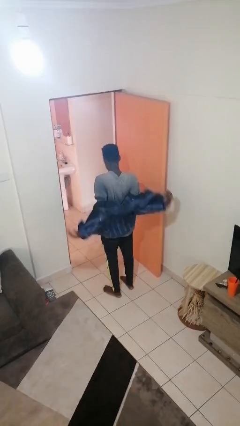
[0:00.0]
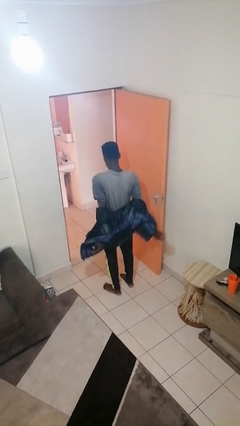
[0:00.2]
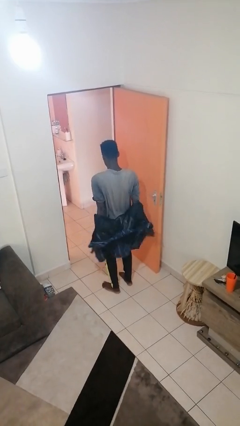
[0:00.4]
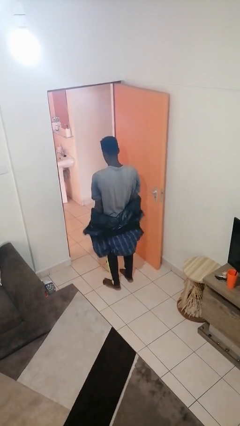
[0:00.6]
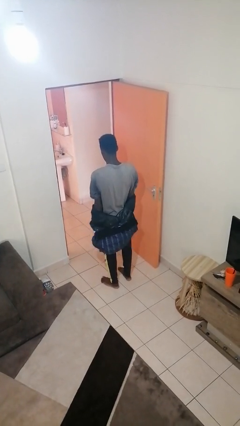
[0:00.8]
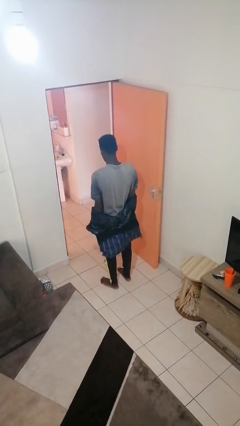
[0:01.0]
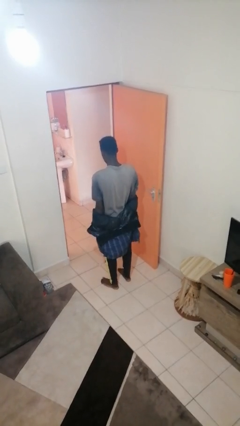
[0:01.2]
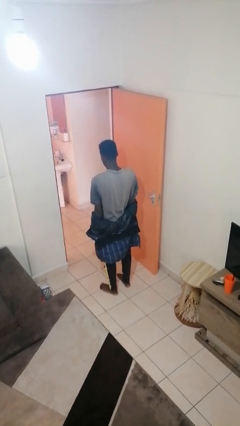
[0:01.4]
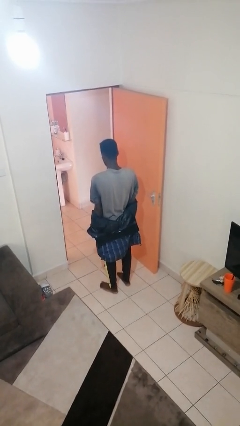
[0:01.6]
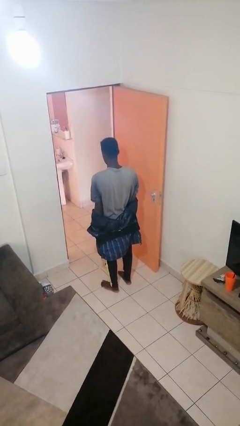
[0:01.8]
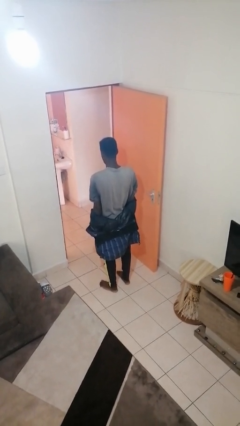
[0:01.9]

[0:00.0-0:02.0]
person takes off jacket

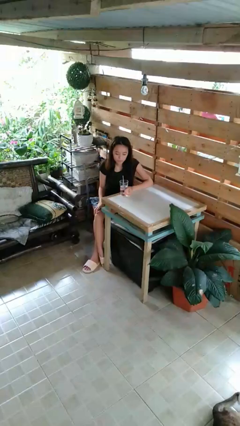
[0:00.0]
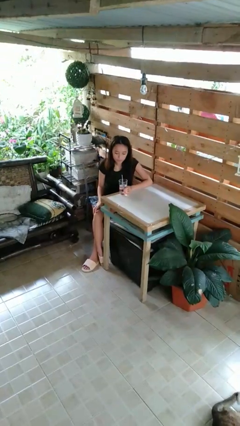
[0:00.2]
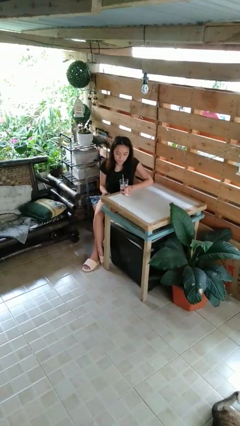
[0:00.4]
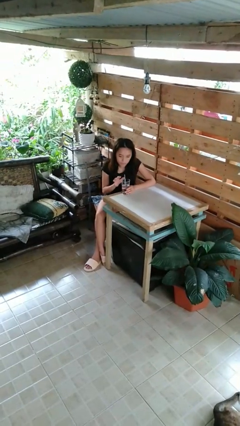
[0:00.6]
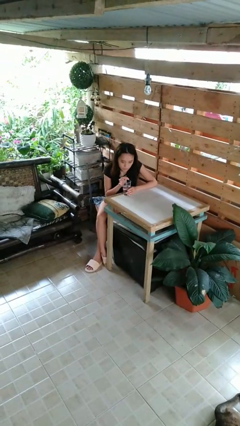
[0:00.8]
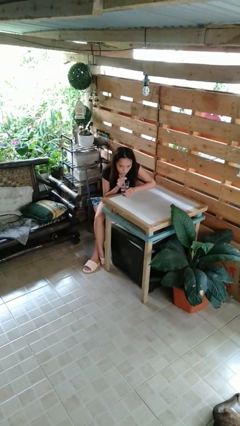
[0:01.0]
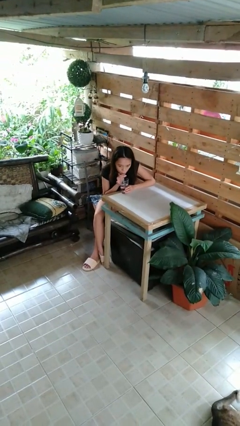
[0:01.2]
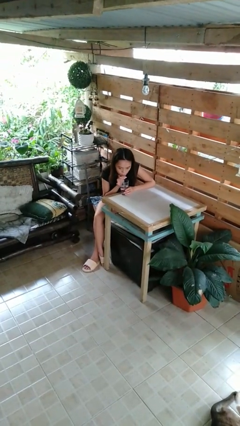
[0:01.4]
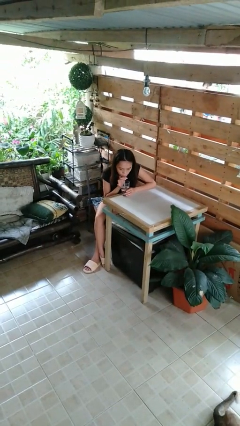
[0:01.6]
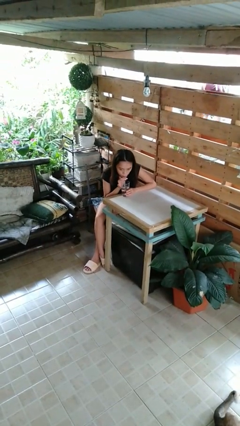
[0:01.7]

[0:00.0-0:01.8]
person drinks from straw

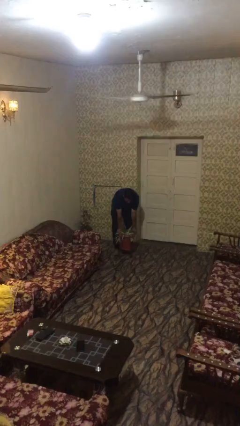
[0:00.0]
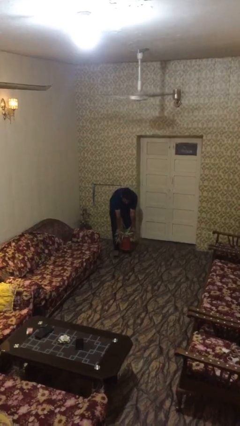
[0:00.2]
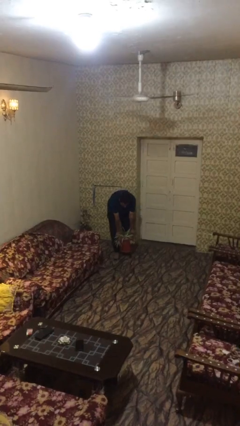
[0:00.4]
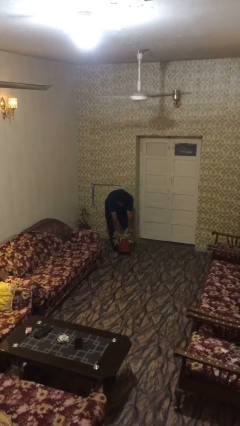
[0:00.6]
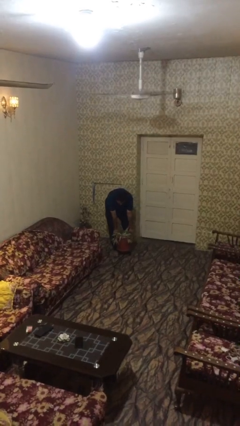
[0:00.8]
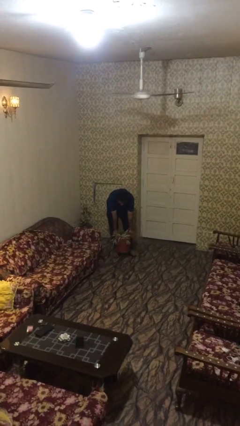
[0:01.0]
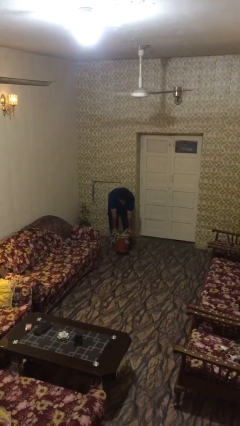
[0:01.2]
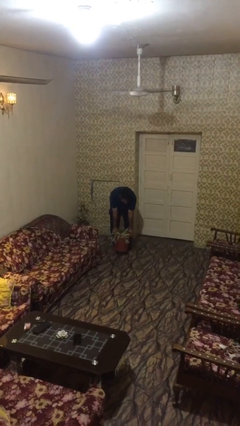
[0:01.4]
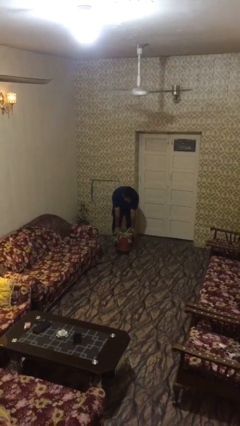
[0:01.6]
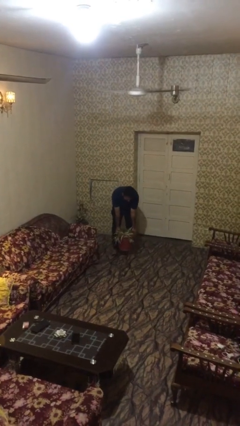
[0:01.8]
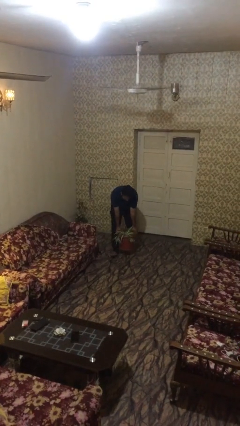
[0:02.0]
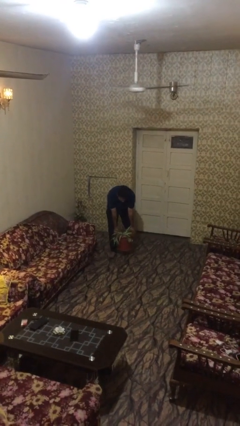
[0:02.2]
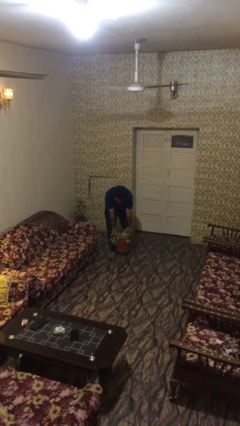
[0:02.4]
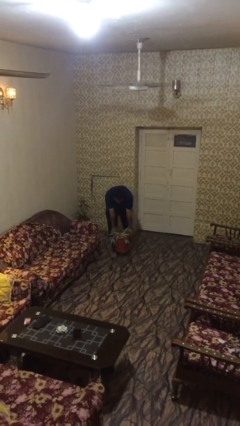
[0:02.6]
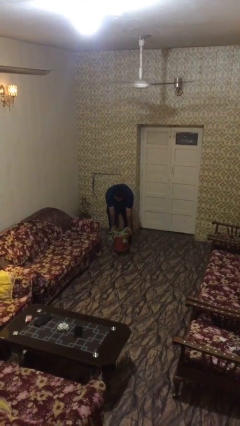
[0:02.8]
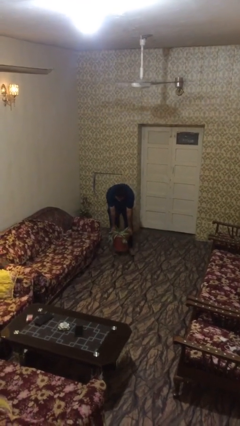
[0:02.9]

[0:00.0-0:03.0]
person carries heavy object

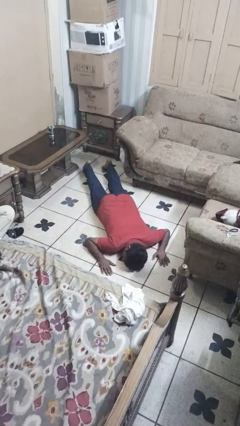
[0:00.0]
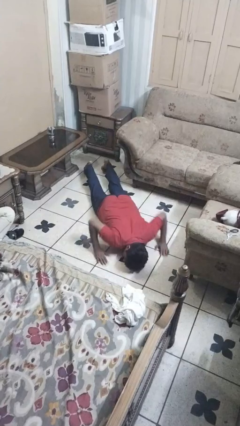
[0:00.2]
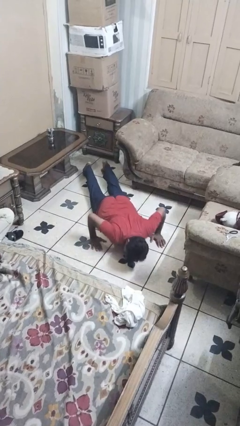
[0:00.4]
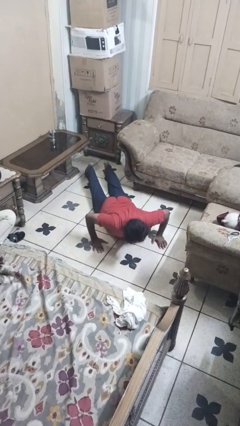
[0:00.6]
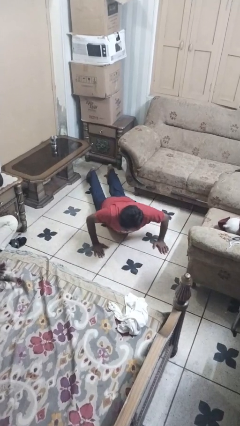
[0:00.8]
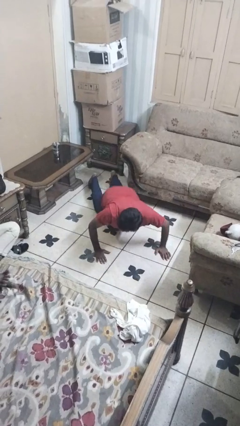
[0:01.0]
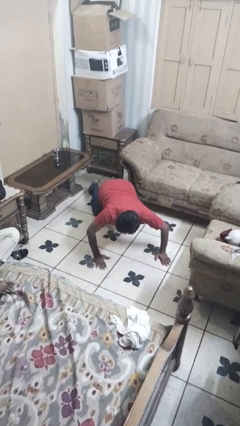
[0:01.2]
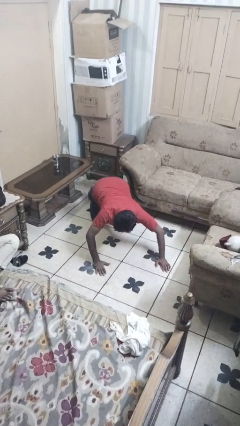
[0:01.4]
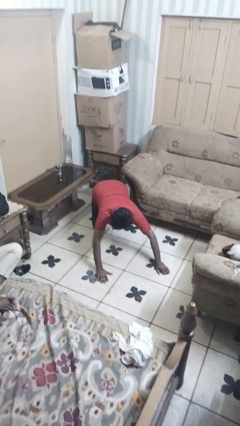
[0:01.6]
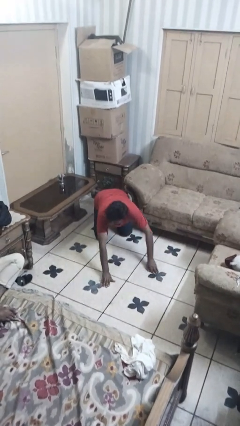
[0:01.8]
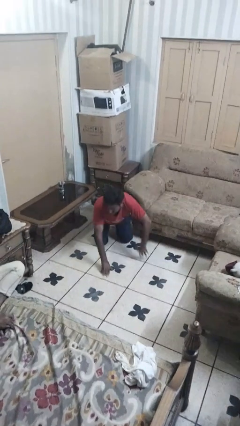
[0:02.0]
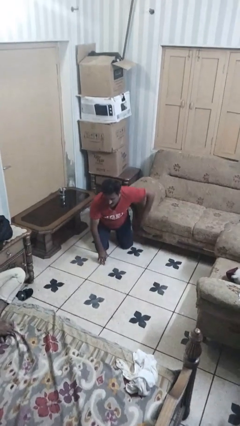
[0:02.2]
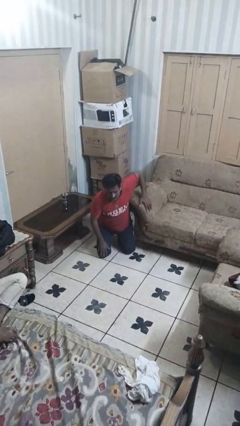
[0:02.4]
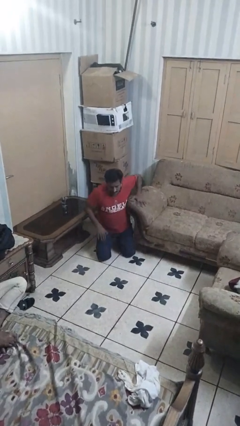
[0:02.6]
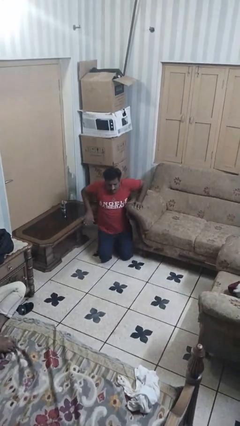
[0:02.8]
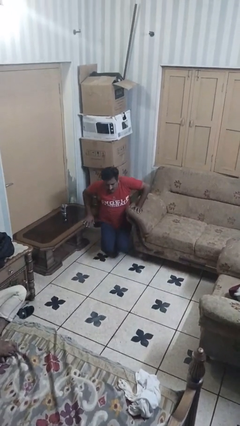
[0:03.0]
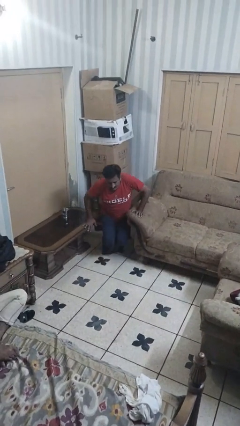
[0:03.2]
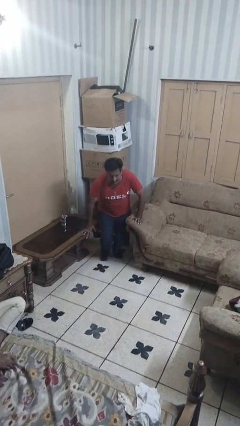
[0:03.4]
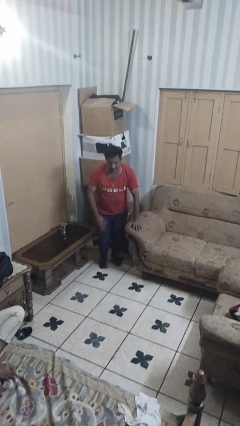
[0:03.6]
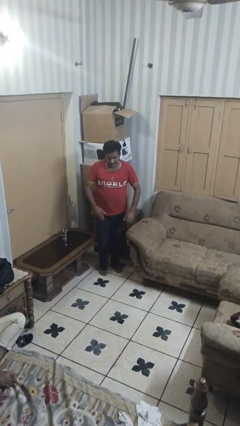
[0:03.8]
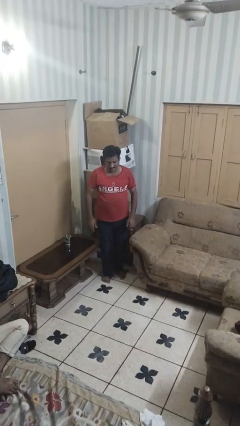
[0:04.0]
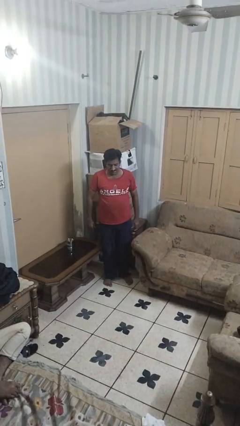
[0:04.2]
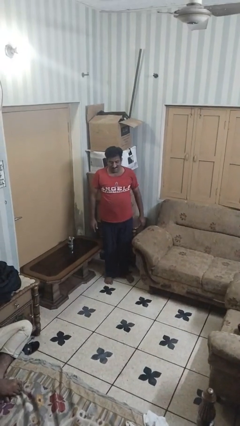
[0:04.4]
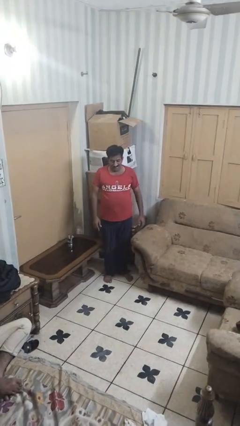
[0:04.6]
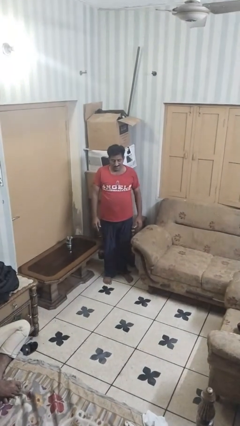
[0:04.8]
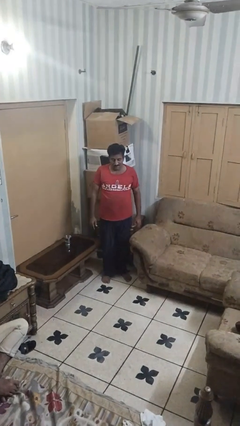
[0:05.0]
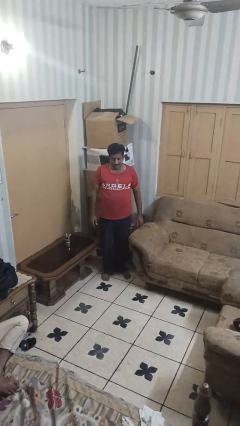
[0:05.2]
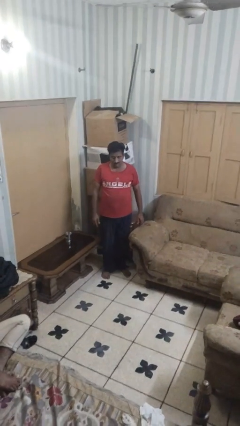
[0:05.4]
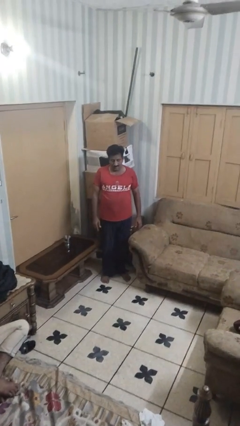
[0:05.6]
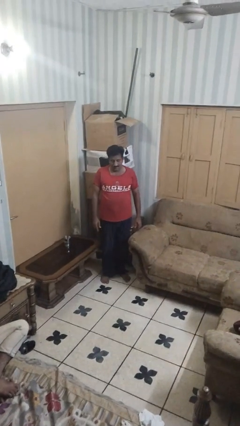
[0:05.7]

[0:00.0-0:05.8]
person stands up from floor

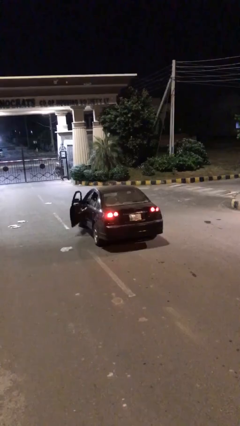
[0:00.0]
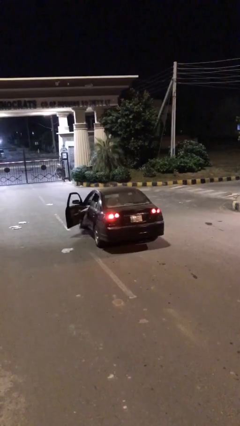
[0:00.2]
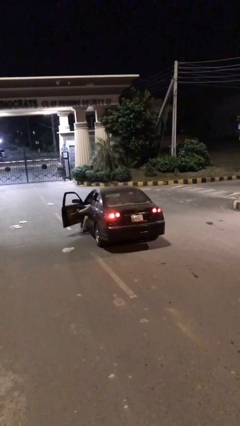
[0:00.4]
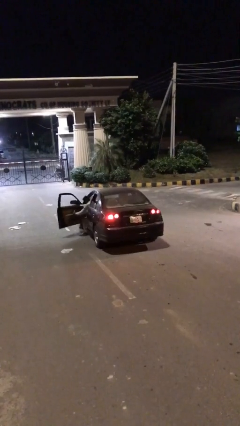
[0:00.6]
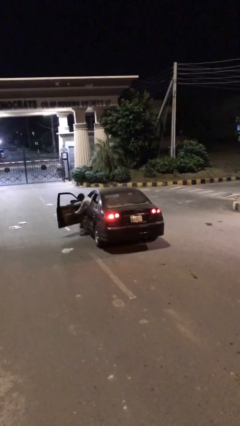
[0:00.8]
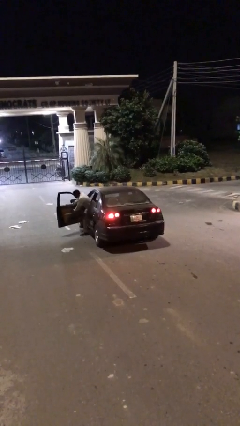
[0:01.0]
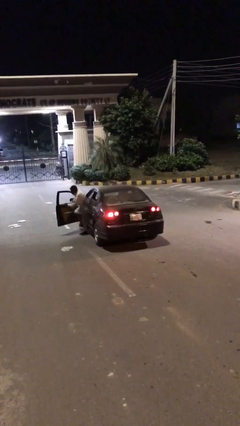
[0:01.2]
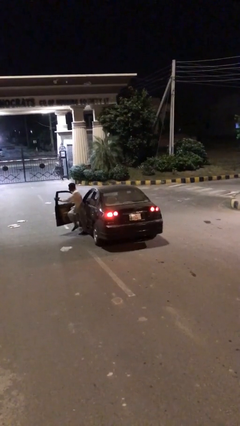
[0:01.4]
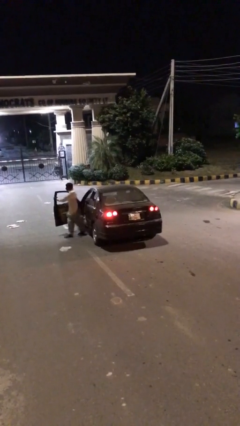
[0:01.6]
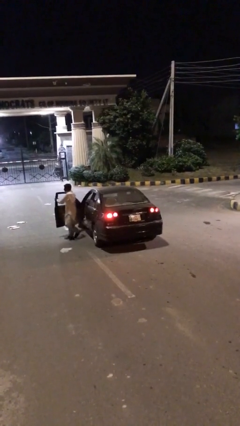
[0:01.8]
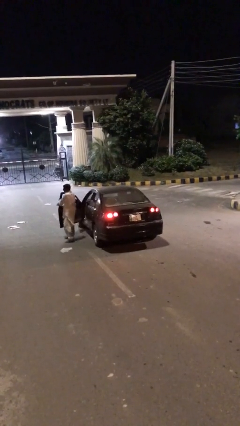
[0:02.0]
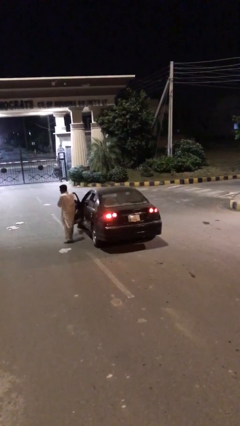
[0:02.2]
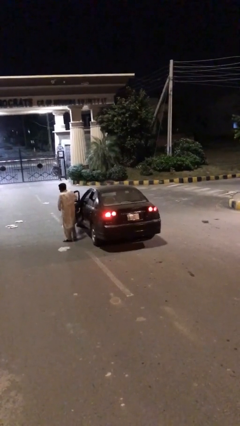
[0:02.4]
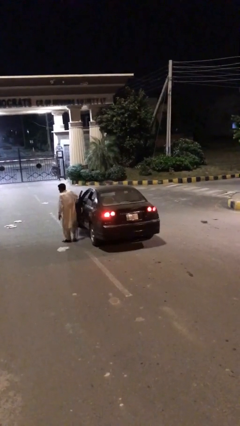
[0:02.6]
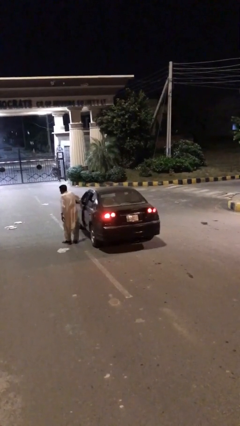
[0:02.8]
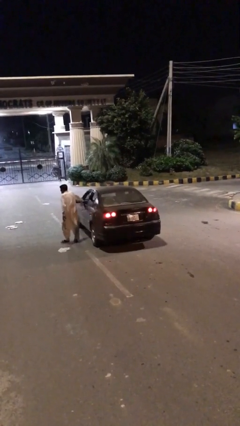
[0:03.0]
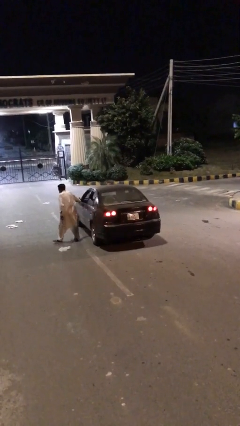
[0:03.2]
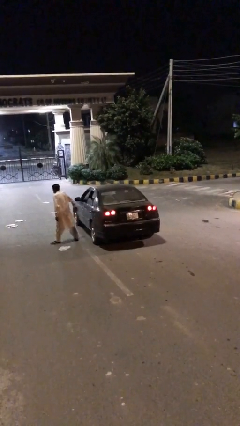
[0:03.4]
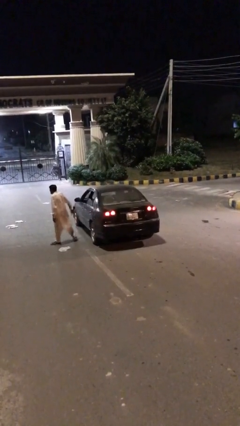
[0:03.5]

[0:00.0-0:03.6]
car drops off person

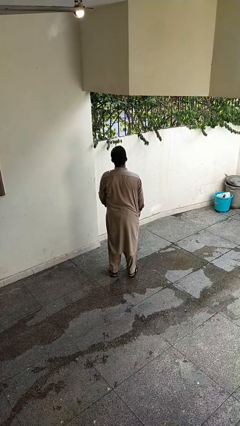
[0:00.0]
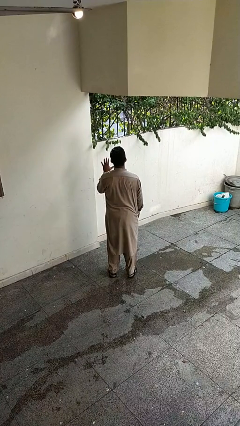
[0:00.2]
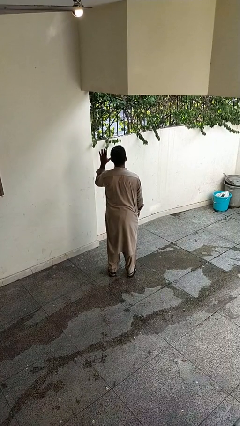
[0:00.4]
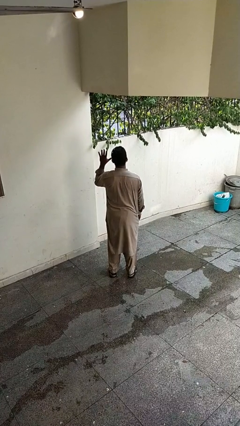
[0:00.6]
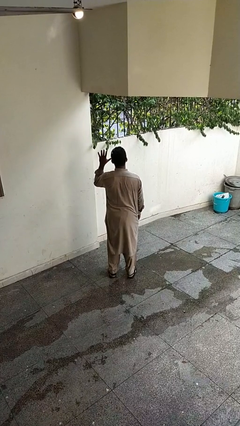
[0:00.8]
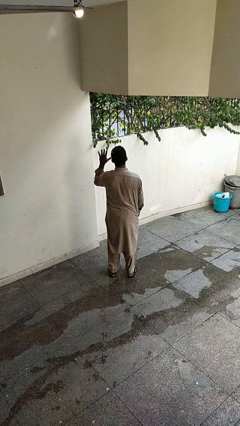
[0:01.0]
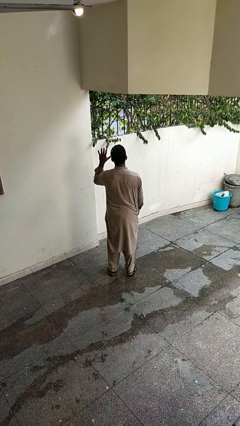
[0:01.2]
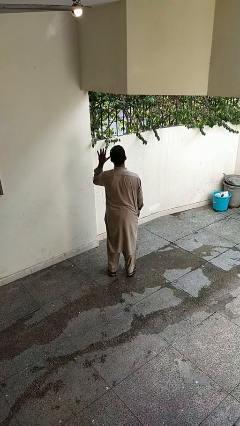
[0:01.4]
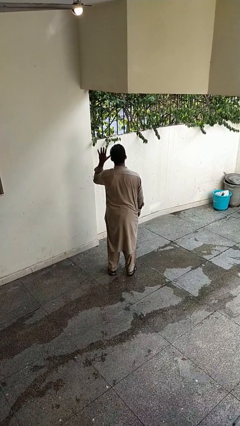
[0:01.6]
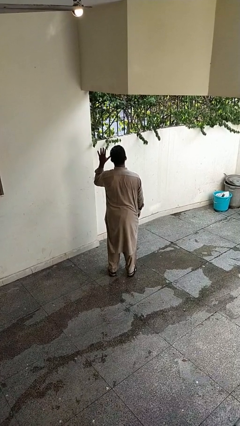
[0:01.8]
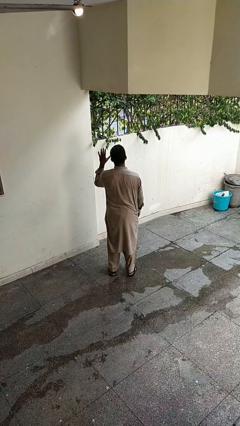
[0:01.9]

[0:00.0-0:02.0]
person gestures number five
